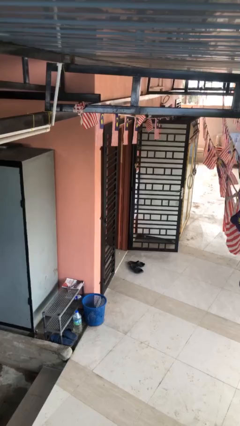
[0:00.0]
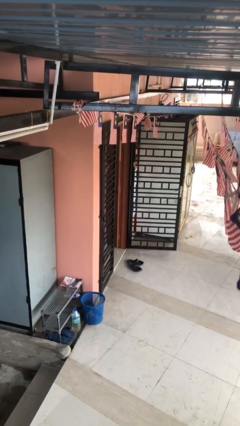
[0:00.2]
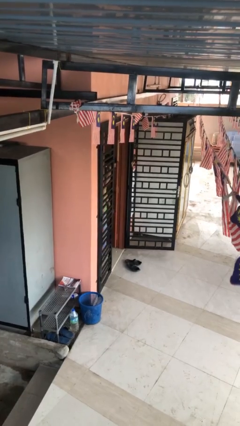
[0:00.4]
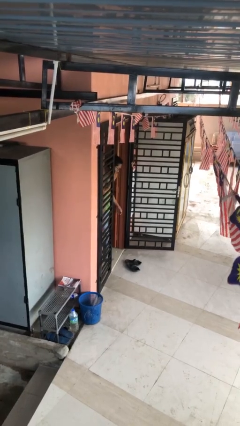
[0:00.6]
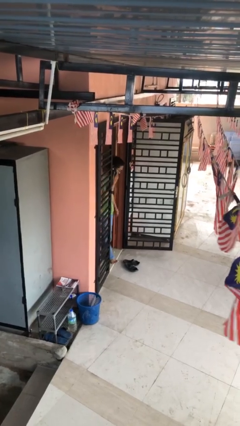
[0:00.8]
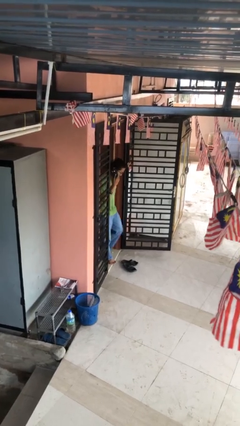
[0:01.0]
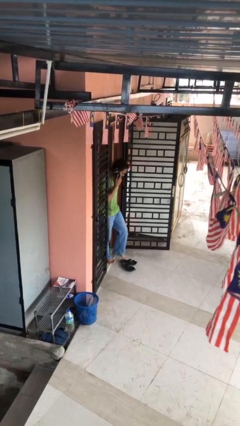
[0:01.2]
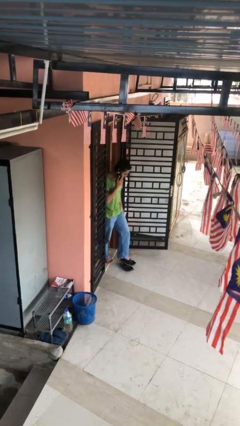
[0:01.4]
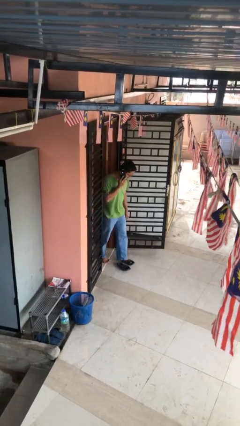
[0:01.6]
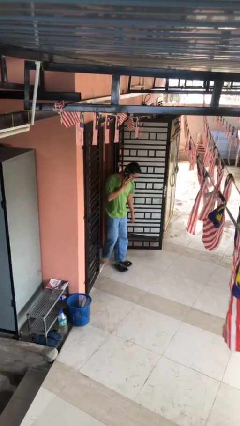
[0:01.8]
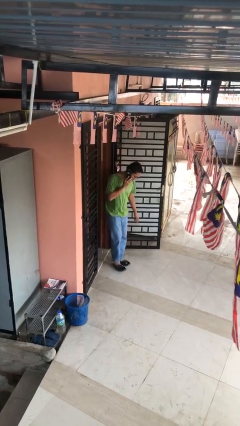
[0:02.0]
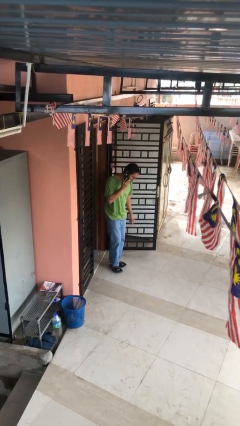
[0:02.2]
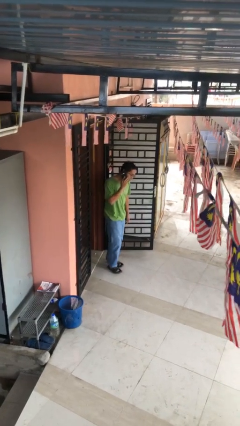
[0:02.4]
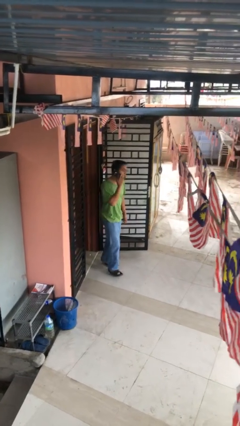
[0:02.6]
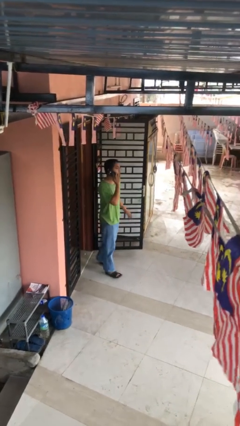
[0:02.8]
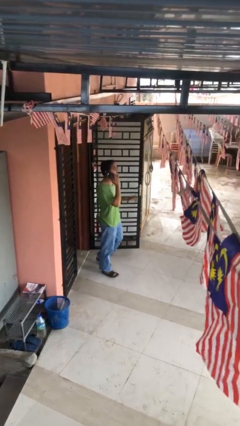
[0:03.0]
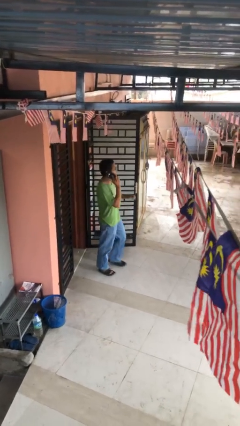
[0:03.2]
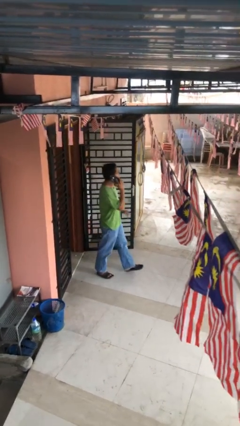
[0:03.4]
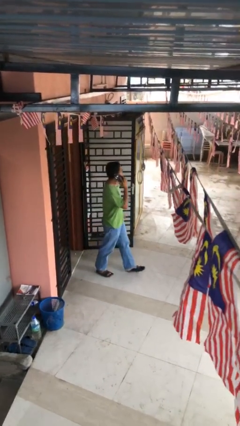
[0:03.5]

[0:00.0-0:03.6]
person enters scene through structure

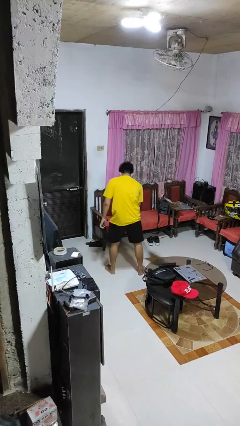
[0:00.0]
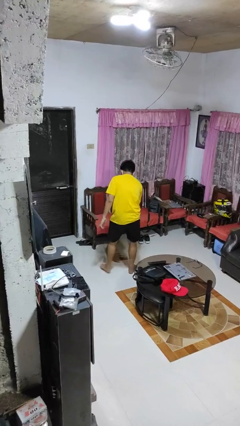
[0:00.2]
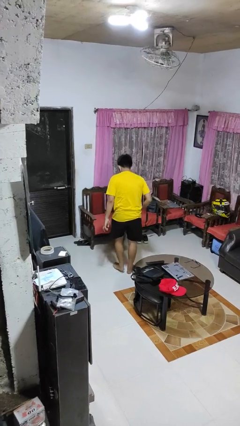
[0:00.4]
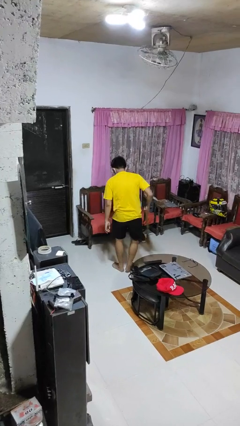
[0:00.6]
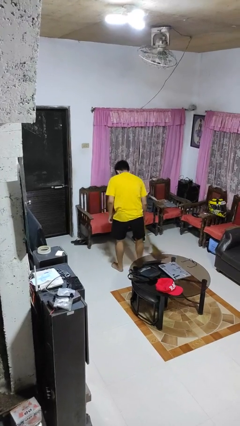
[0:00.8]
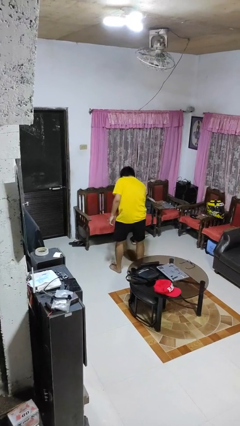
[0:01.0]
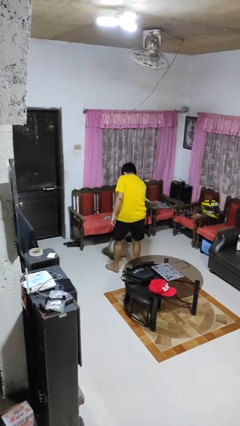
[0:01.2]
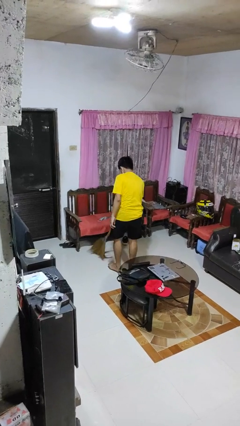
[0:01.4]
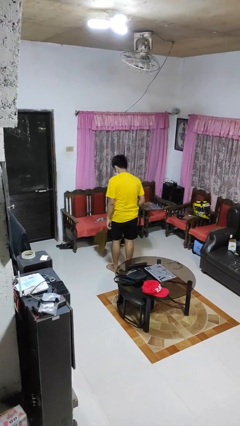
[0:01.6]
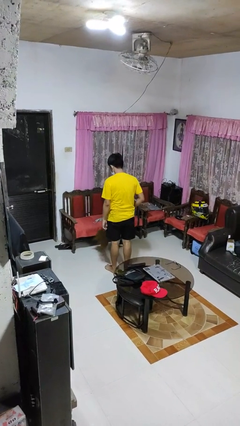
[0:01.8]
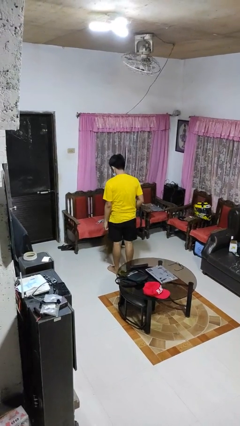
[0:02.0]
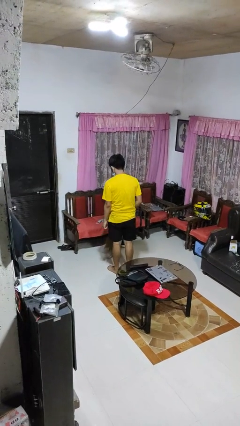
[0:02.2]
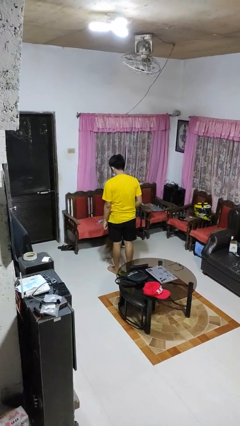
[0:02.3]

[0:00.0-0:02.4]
person sweeps floor

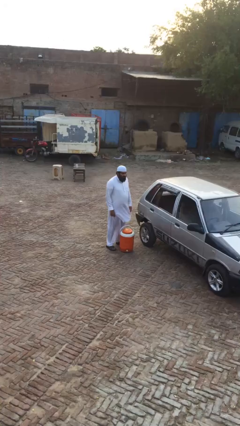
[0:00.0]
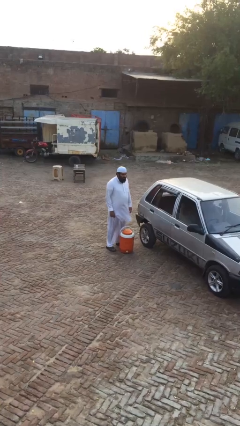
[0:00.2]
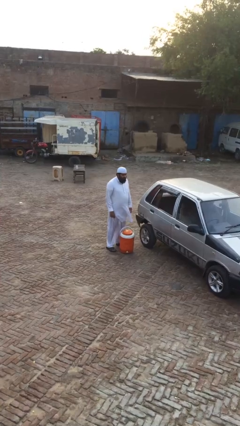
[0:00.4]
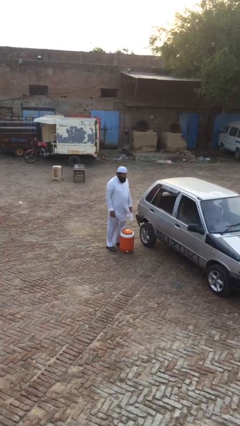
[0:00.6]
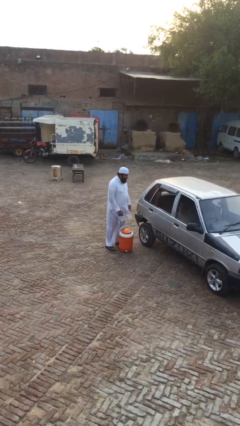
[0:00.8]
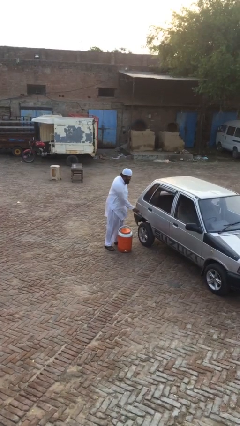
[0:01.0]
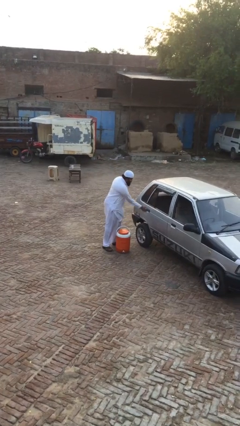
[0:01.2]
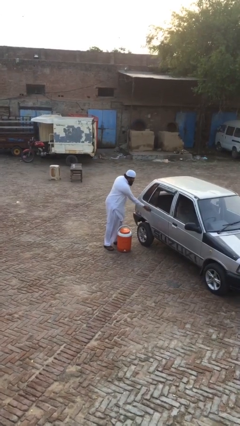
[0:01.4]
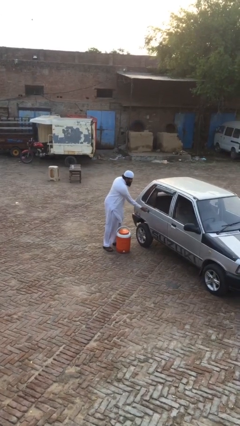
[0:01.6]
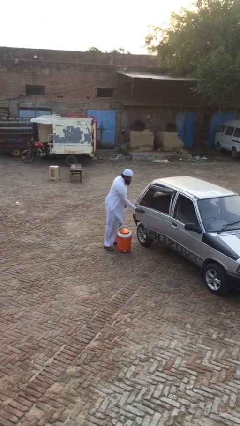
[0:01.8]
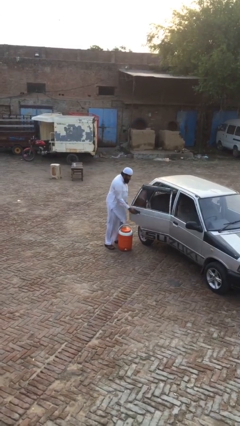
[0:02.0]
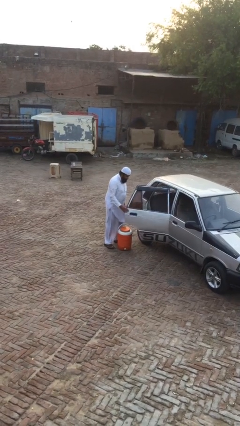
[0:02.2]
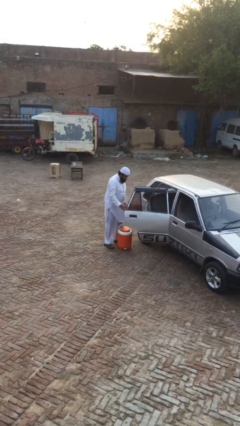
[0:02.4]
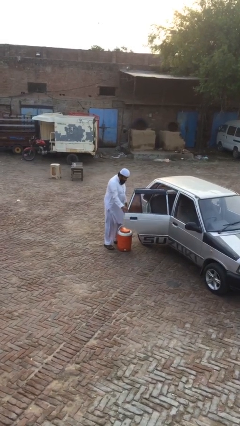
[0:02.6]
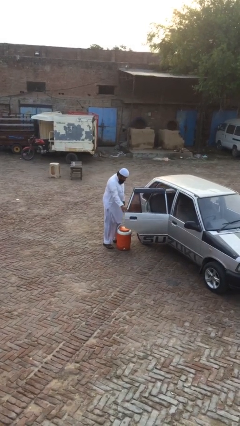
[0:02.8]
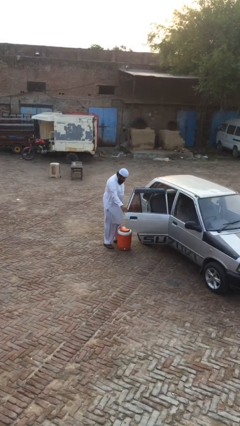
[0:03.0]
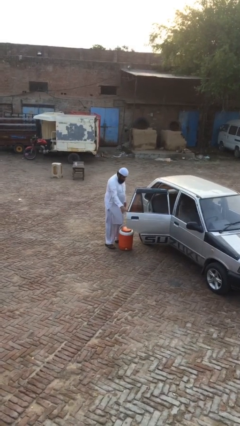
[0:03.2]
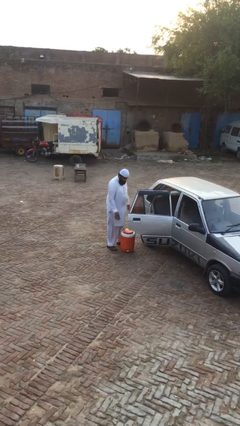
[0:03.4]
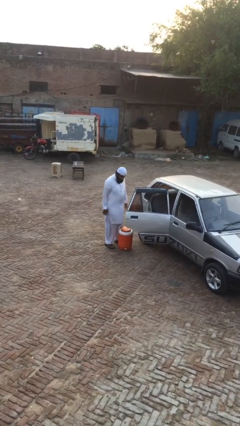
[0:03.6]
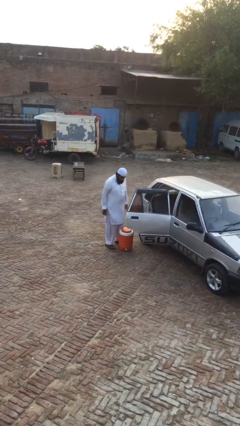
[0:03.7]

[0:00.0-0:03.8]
person opens car door

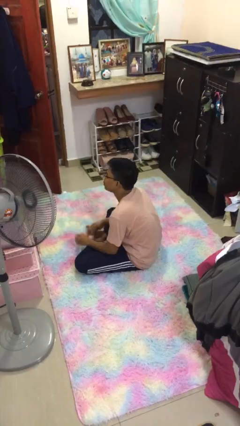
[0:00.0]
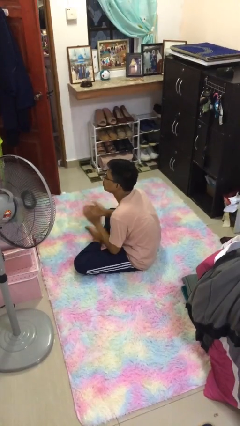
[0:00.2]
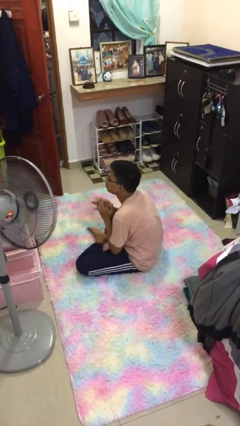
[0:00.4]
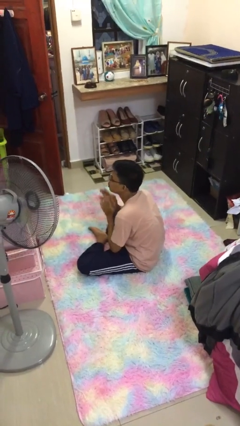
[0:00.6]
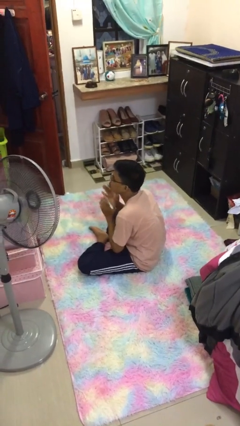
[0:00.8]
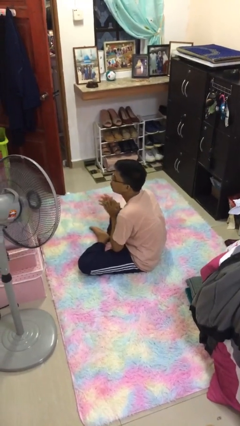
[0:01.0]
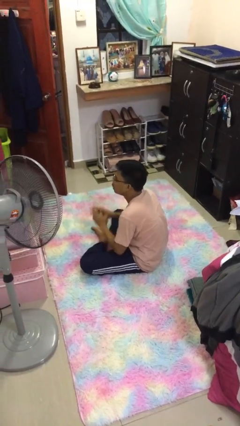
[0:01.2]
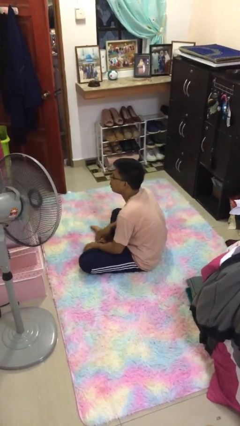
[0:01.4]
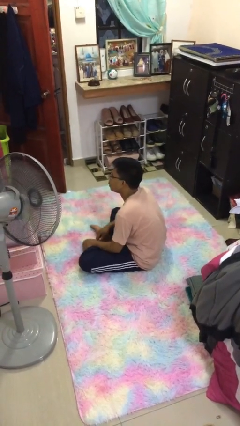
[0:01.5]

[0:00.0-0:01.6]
person claps hands

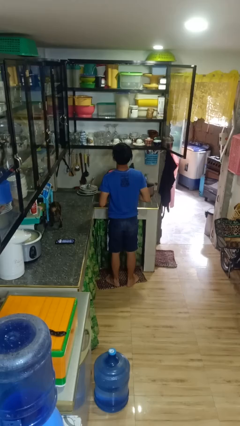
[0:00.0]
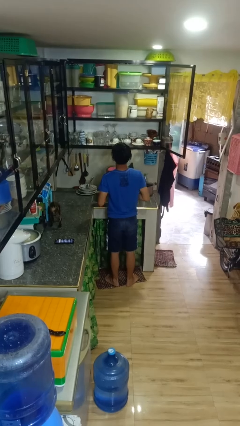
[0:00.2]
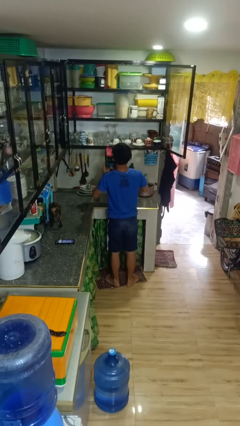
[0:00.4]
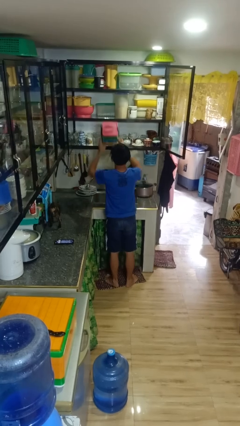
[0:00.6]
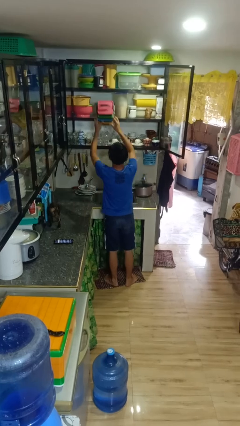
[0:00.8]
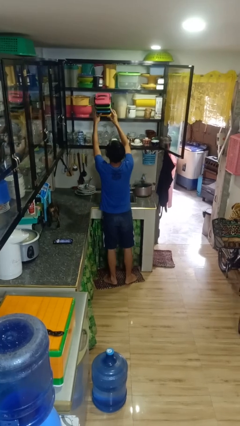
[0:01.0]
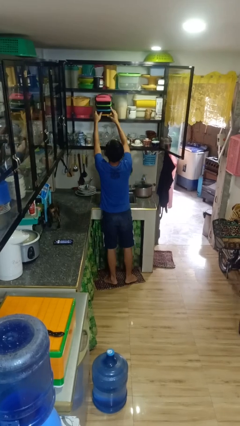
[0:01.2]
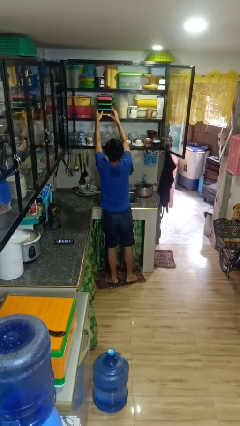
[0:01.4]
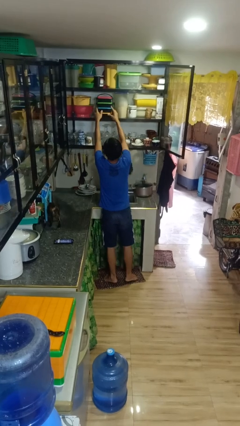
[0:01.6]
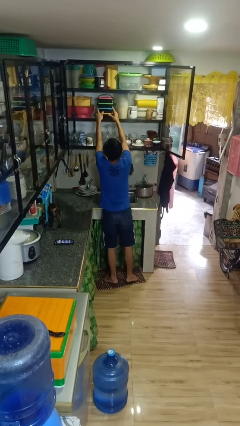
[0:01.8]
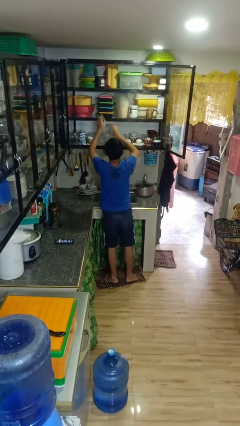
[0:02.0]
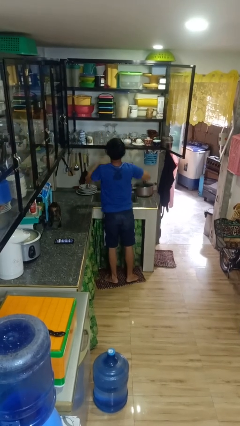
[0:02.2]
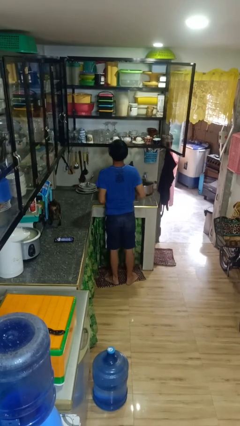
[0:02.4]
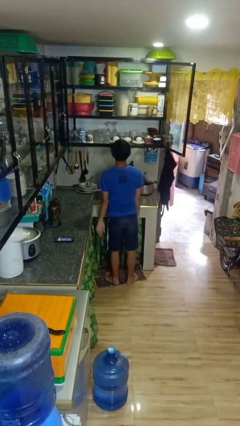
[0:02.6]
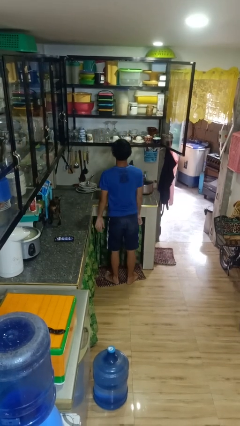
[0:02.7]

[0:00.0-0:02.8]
person puts down object into cabinet

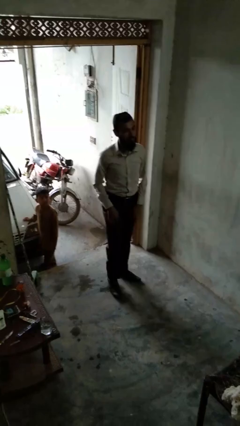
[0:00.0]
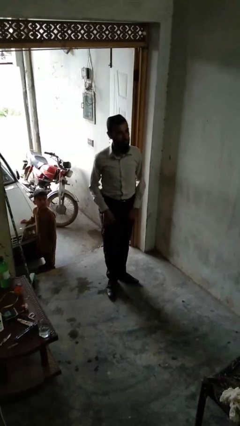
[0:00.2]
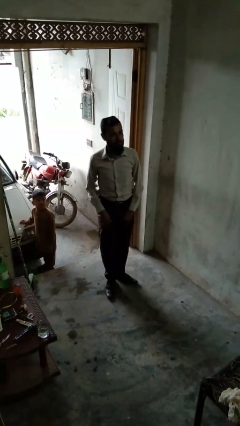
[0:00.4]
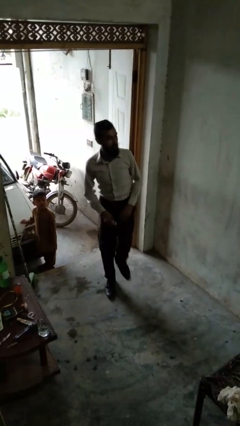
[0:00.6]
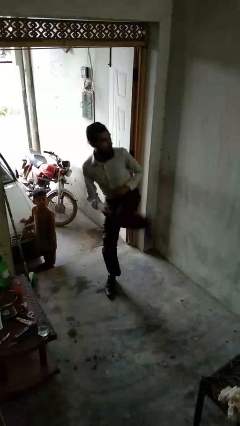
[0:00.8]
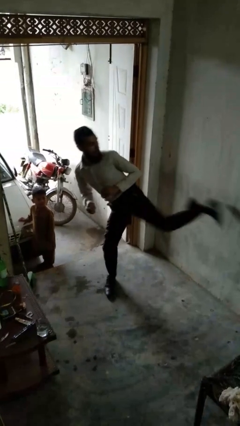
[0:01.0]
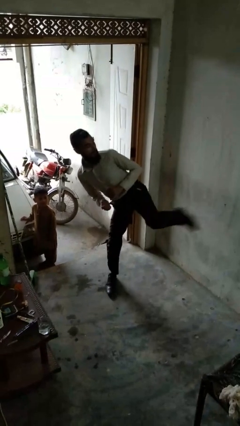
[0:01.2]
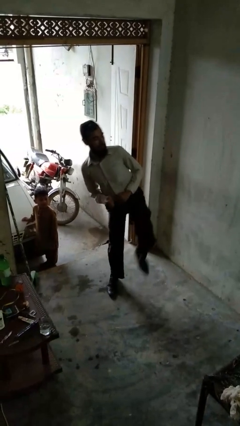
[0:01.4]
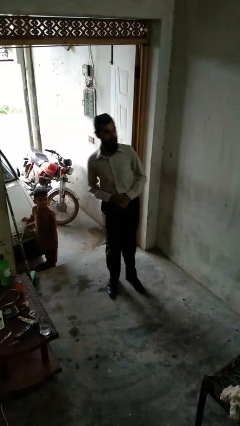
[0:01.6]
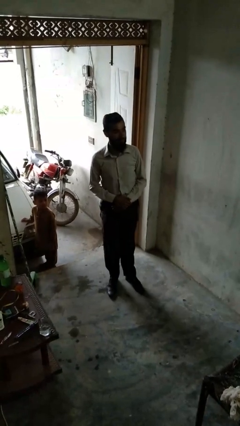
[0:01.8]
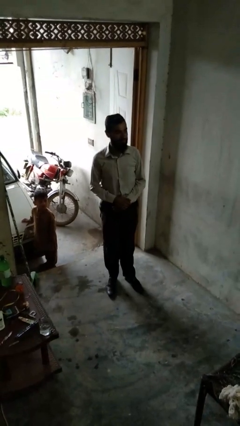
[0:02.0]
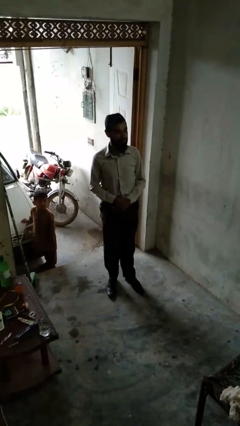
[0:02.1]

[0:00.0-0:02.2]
person karate kicks

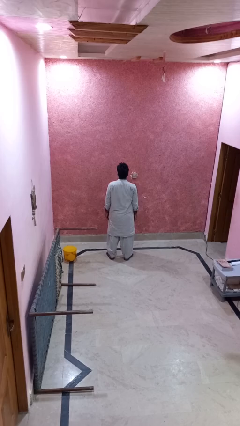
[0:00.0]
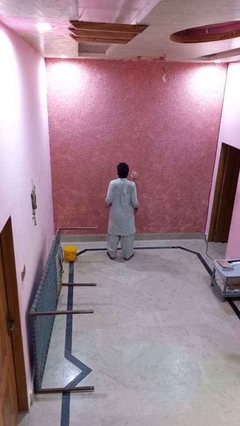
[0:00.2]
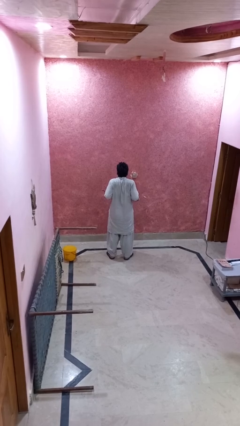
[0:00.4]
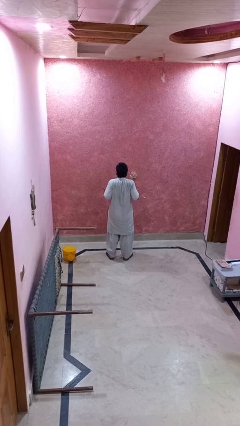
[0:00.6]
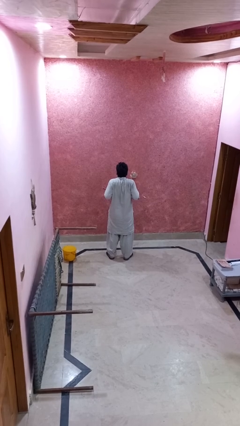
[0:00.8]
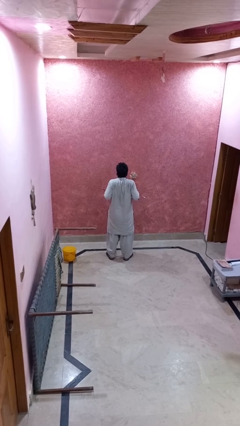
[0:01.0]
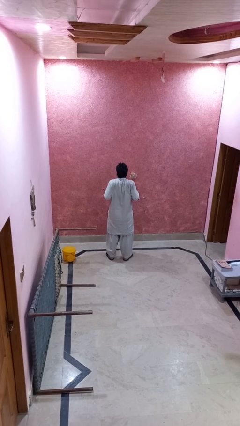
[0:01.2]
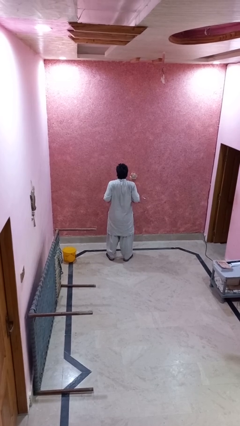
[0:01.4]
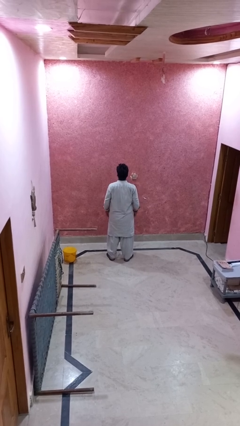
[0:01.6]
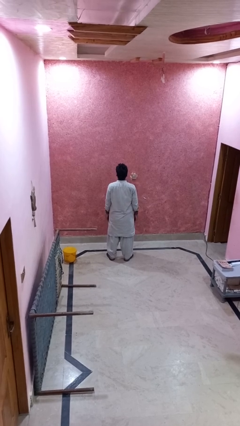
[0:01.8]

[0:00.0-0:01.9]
person shrugs
